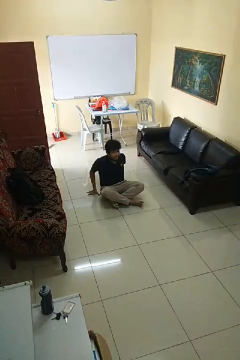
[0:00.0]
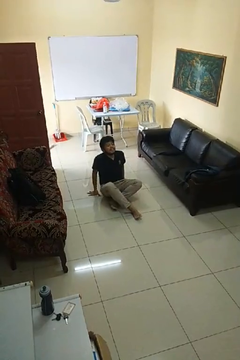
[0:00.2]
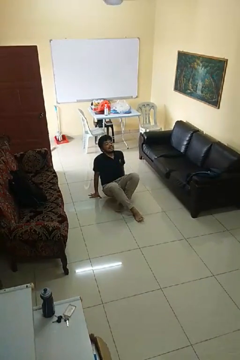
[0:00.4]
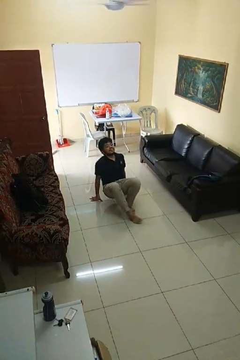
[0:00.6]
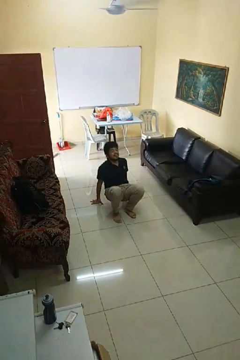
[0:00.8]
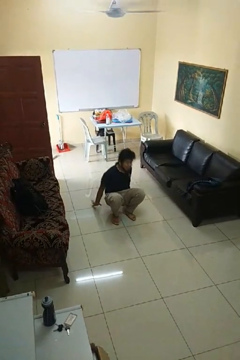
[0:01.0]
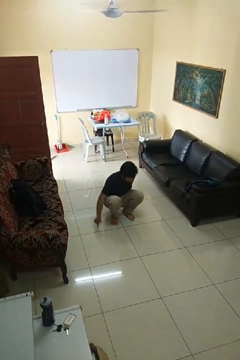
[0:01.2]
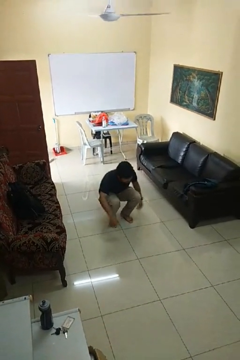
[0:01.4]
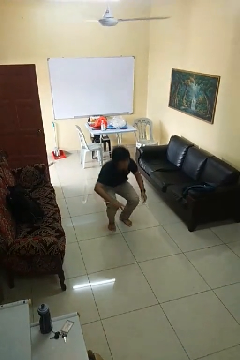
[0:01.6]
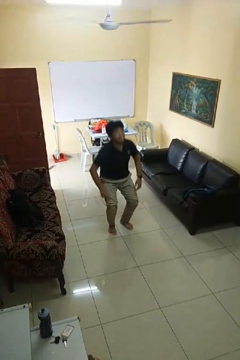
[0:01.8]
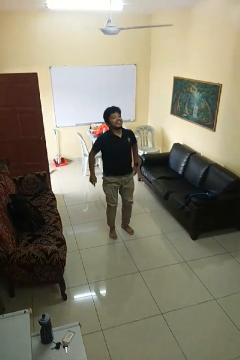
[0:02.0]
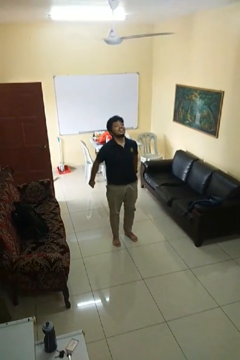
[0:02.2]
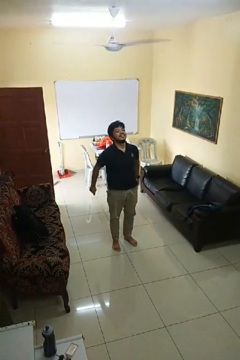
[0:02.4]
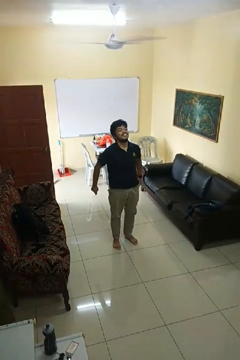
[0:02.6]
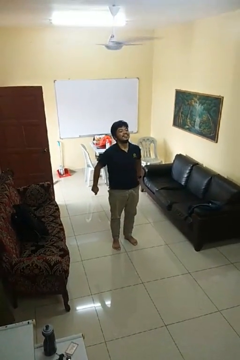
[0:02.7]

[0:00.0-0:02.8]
person stands up from floor

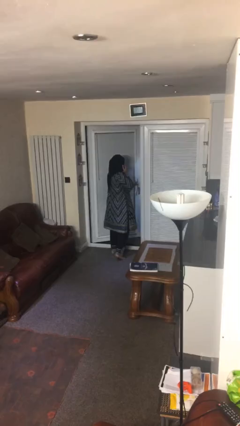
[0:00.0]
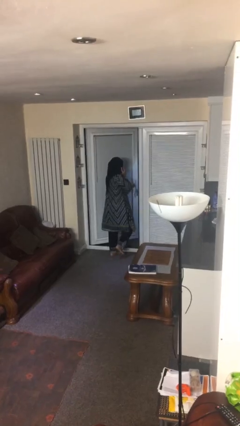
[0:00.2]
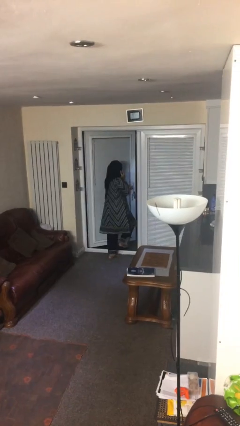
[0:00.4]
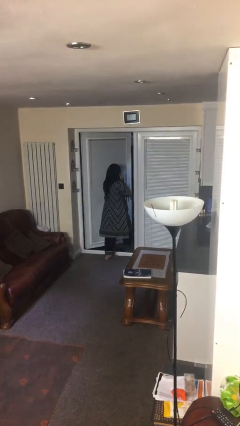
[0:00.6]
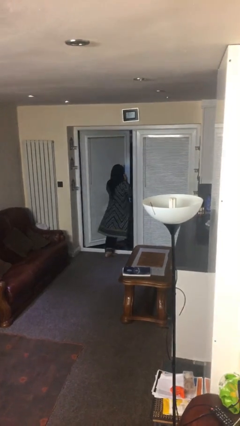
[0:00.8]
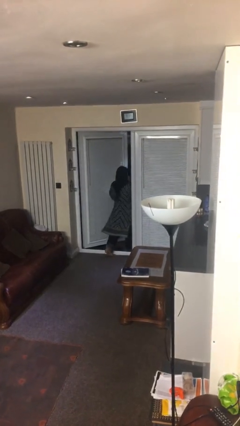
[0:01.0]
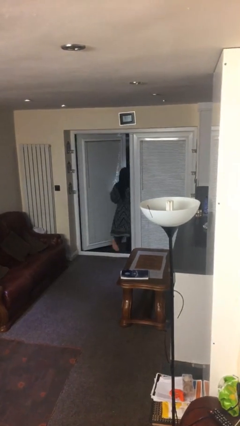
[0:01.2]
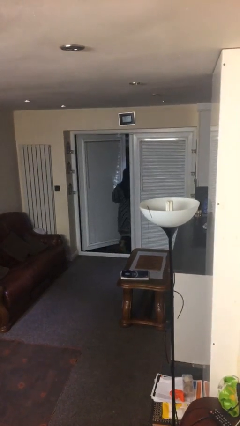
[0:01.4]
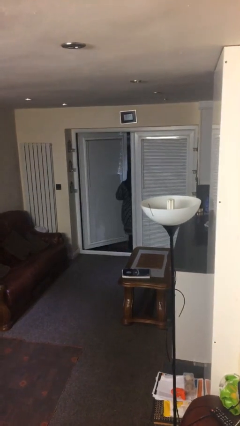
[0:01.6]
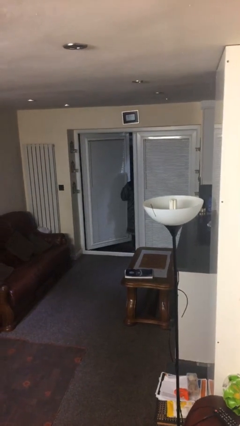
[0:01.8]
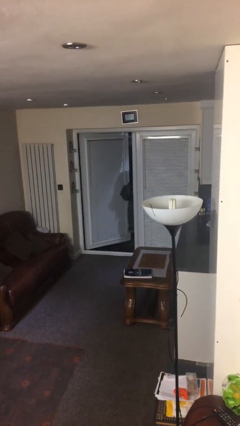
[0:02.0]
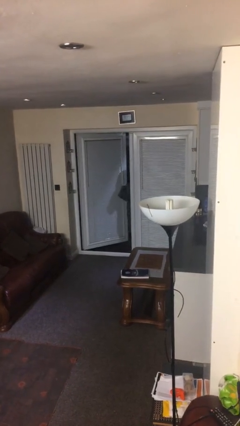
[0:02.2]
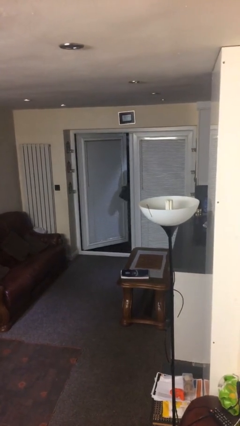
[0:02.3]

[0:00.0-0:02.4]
person exits scene through structure

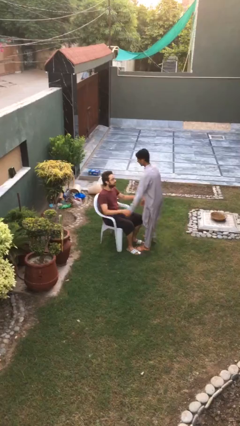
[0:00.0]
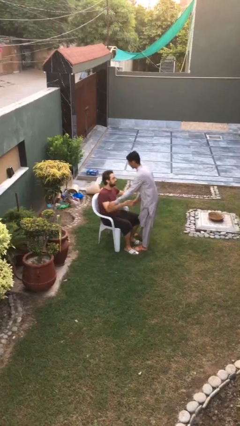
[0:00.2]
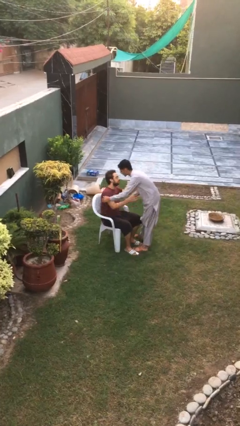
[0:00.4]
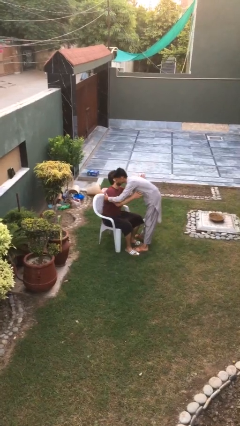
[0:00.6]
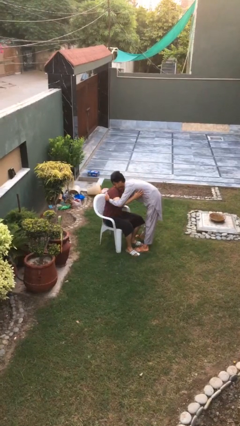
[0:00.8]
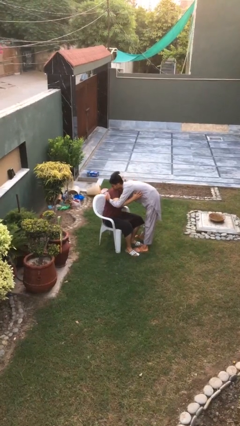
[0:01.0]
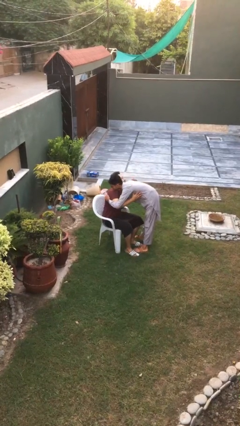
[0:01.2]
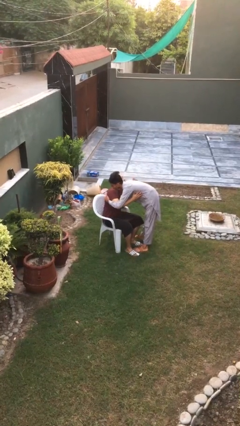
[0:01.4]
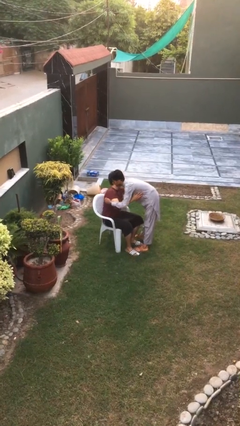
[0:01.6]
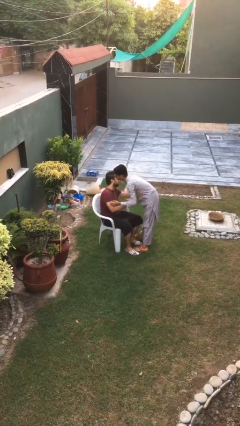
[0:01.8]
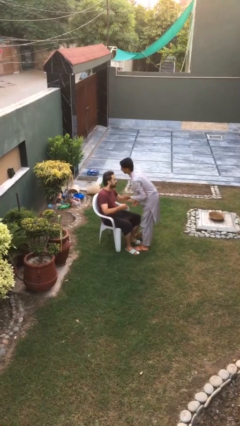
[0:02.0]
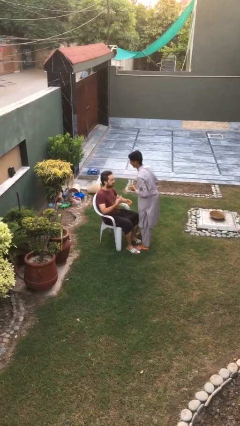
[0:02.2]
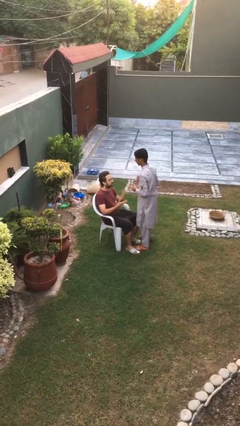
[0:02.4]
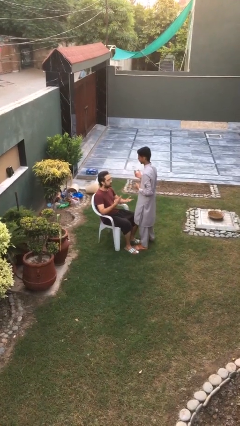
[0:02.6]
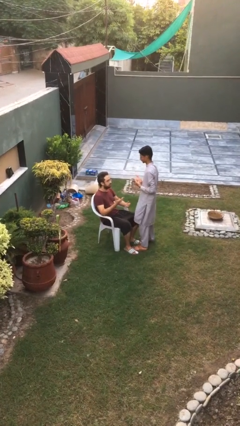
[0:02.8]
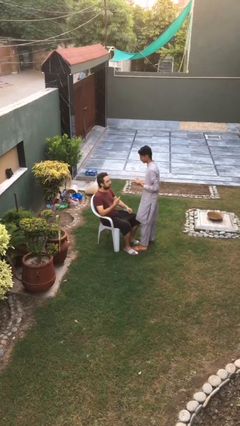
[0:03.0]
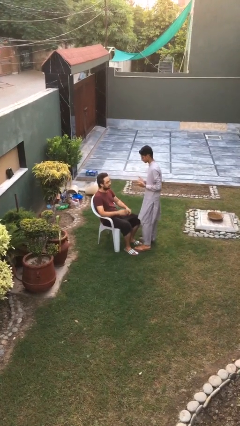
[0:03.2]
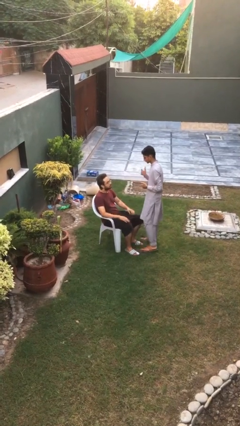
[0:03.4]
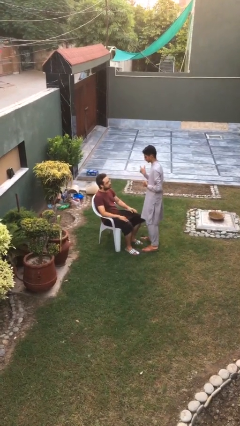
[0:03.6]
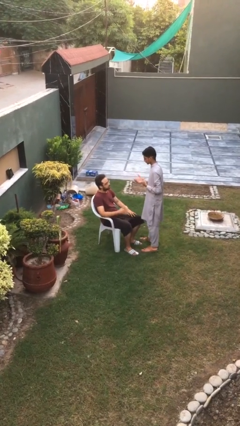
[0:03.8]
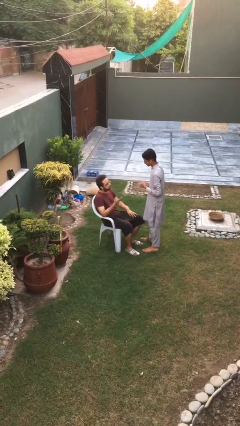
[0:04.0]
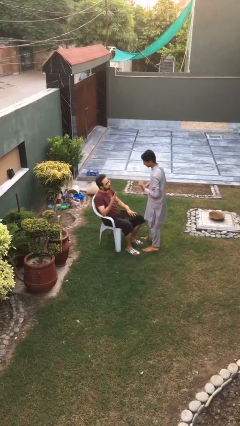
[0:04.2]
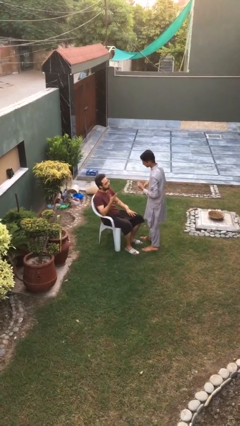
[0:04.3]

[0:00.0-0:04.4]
person embraces person

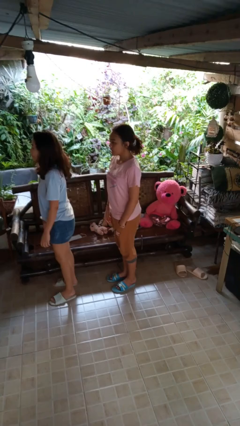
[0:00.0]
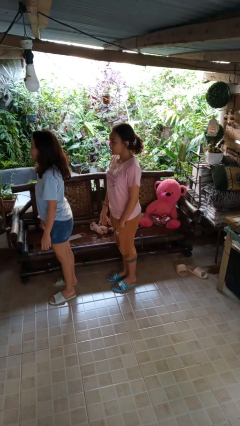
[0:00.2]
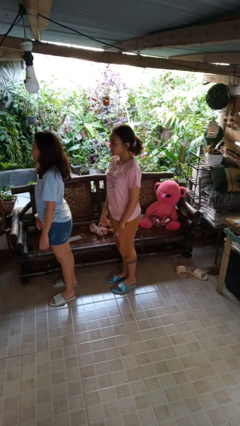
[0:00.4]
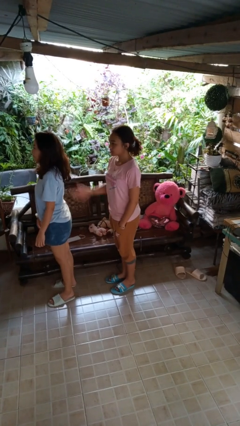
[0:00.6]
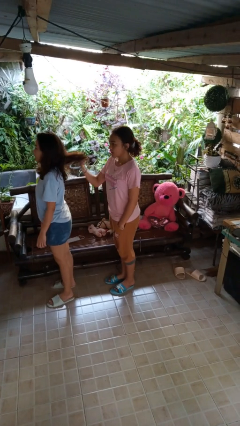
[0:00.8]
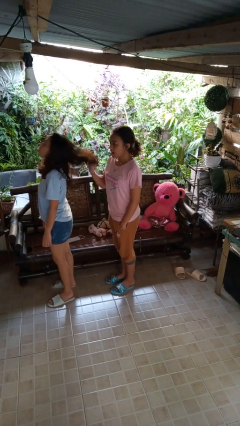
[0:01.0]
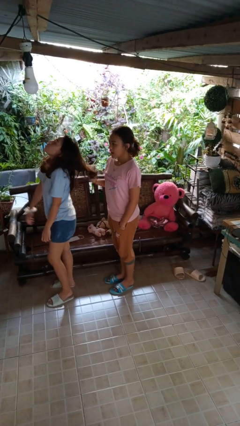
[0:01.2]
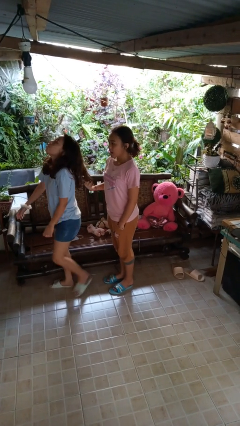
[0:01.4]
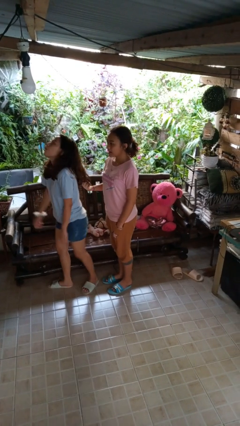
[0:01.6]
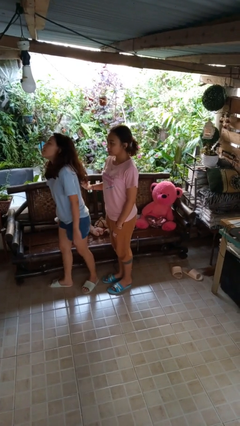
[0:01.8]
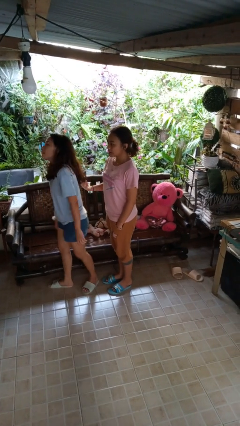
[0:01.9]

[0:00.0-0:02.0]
person grabs person by hair

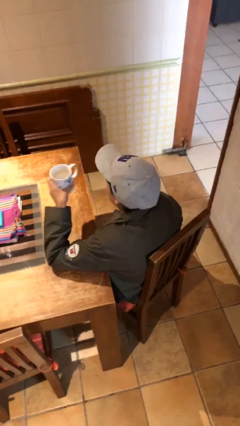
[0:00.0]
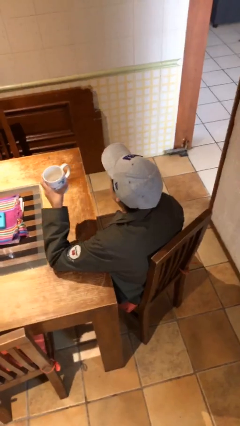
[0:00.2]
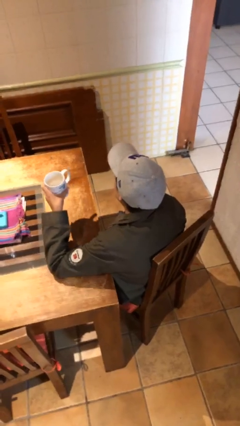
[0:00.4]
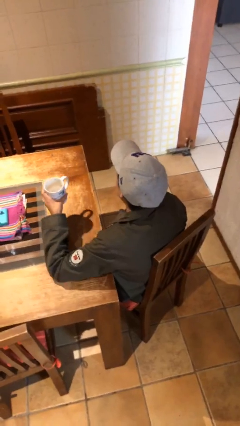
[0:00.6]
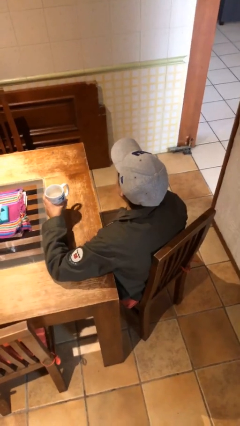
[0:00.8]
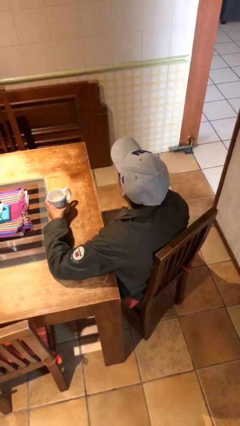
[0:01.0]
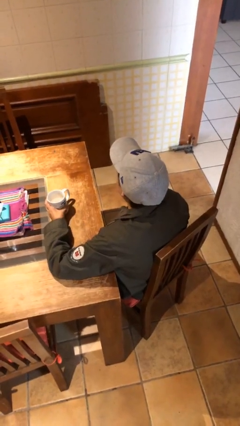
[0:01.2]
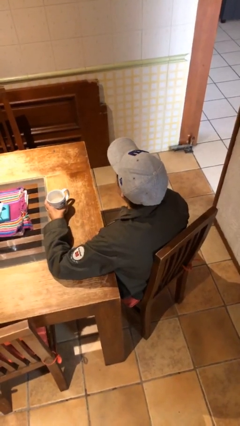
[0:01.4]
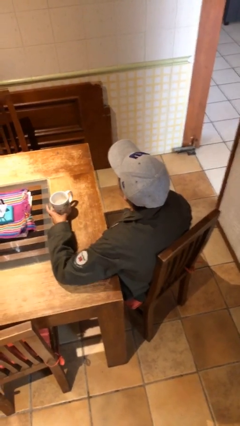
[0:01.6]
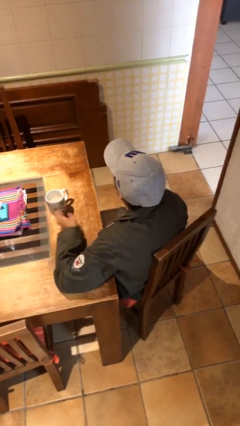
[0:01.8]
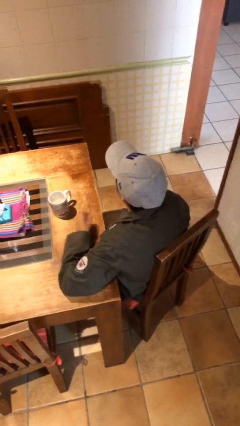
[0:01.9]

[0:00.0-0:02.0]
person puts down object on table

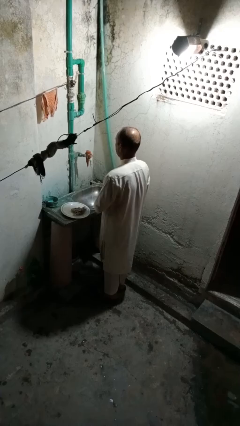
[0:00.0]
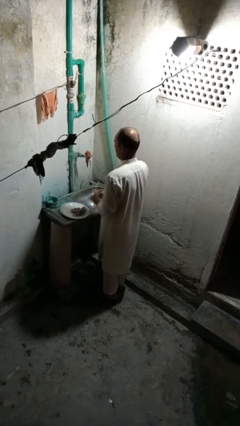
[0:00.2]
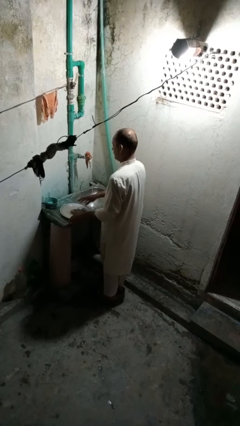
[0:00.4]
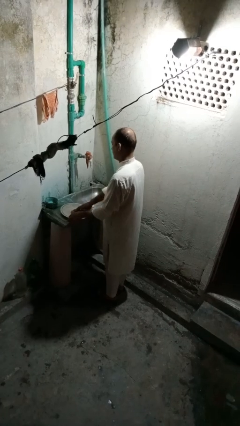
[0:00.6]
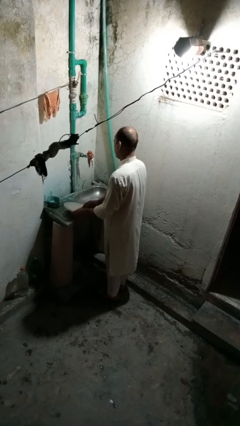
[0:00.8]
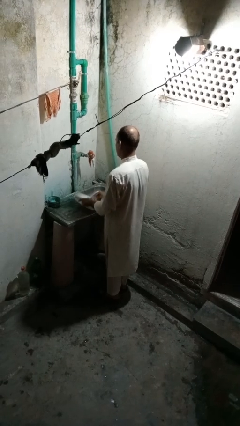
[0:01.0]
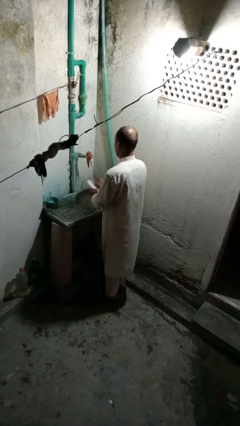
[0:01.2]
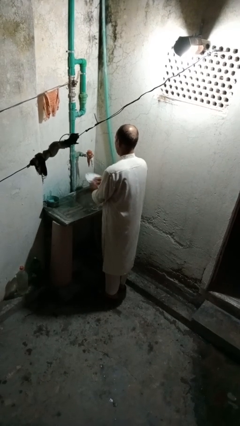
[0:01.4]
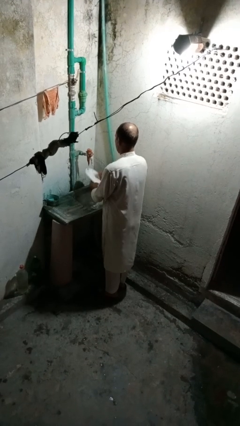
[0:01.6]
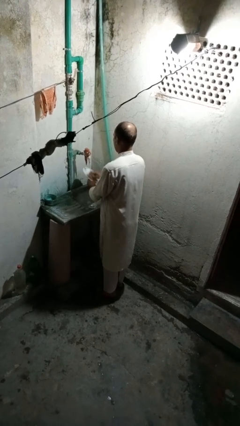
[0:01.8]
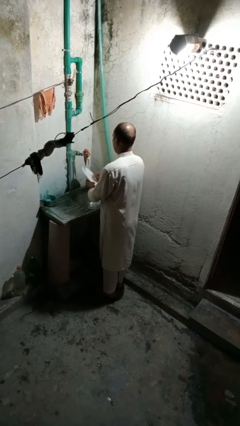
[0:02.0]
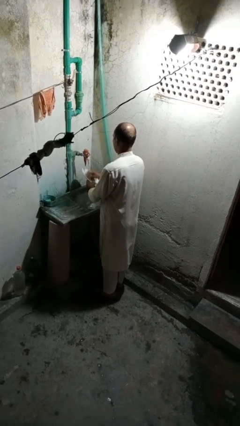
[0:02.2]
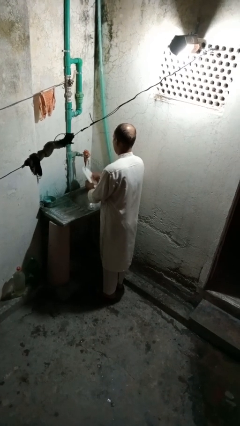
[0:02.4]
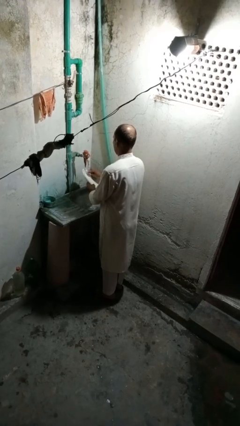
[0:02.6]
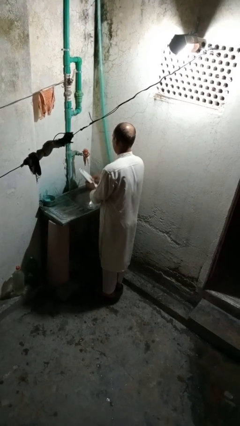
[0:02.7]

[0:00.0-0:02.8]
person washes dish

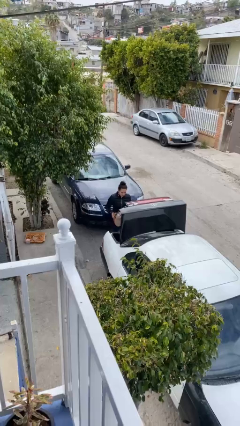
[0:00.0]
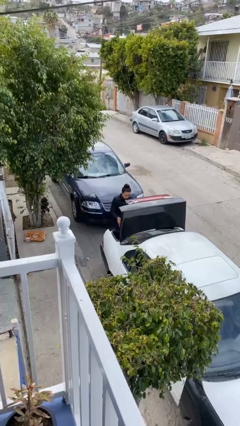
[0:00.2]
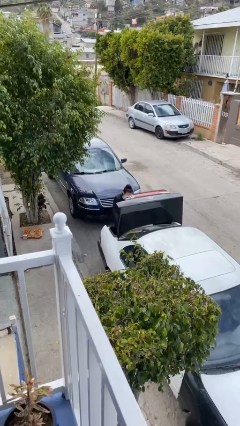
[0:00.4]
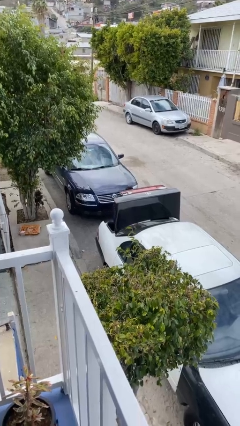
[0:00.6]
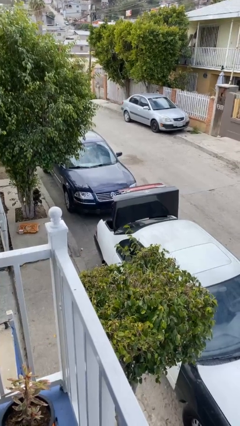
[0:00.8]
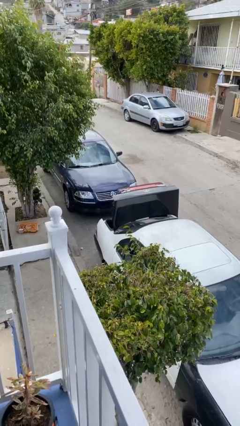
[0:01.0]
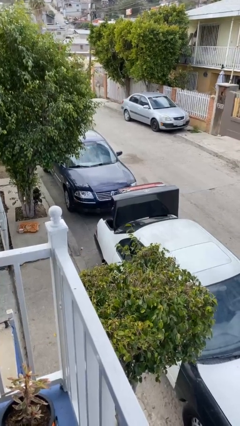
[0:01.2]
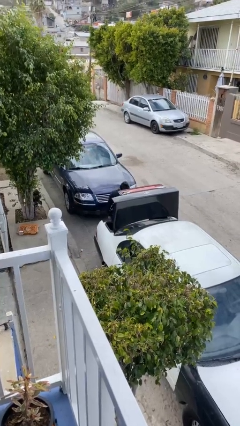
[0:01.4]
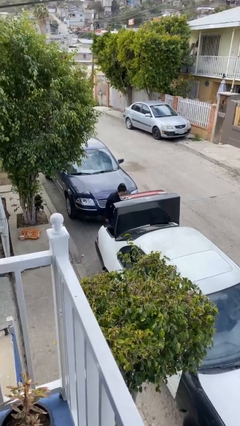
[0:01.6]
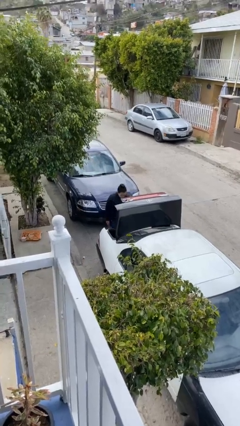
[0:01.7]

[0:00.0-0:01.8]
person loads car
